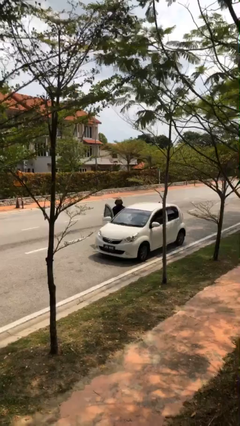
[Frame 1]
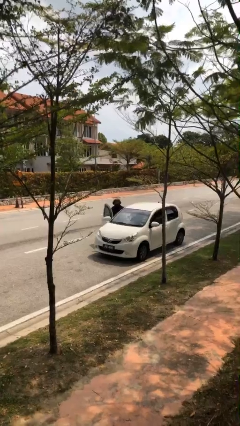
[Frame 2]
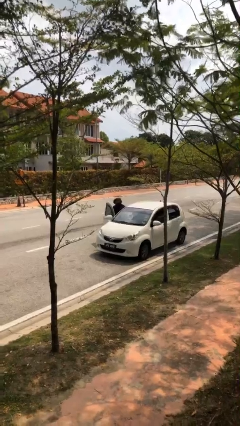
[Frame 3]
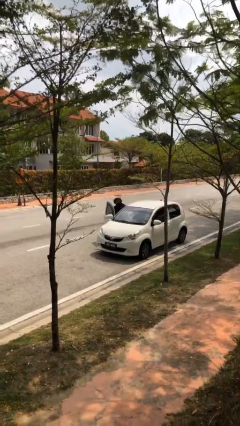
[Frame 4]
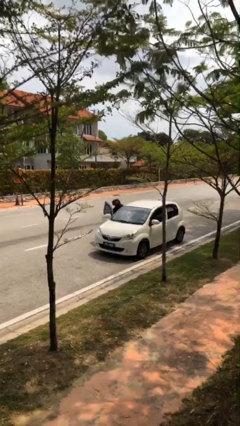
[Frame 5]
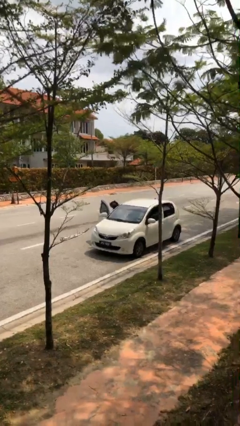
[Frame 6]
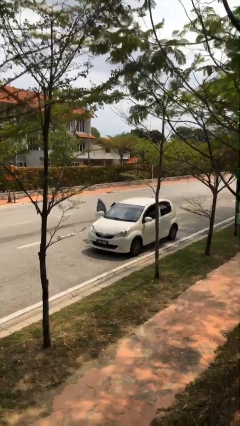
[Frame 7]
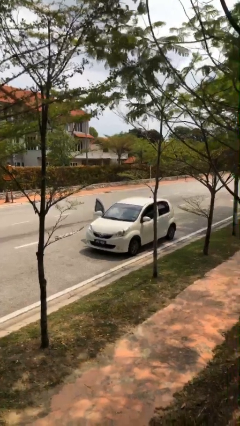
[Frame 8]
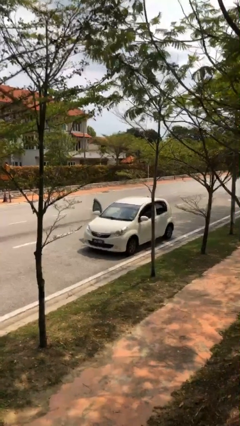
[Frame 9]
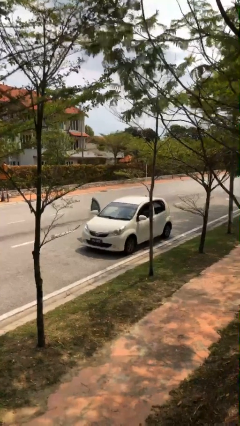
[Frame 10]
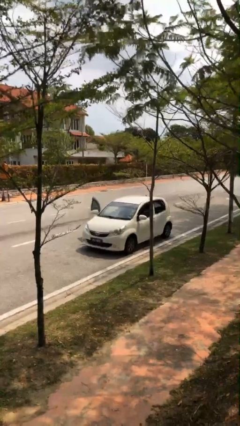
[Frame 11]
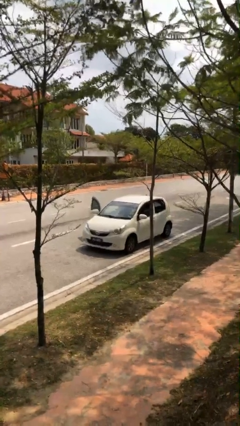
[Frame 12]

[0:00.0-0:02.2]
person enters car

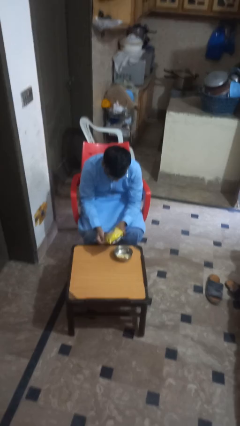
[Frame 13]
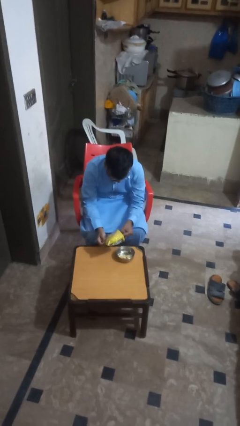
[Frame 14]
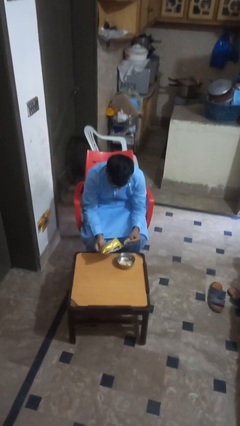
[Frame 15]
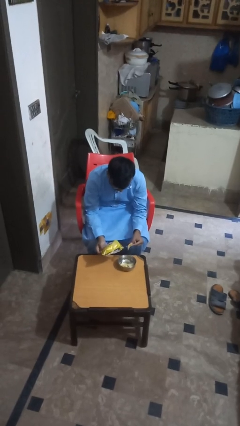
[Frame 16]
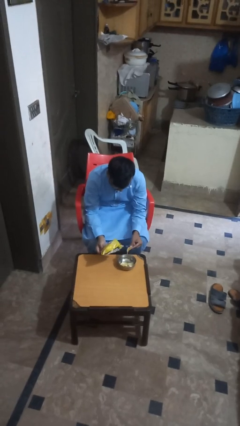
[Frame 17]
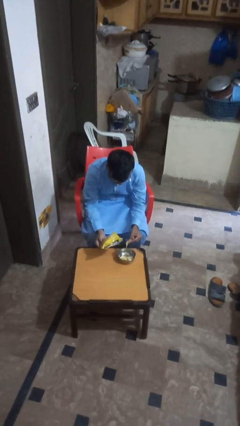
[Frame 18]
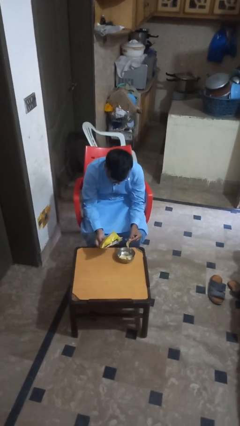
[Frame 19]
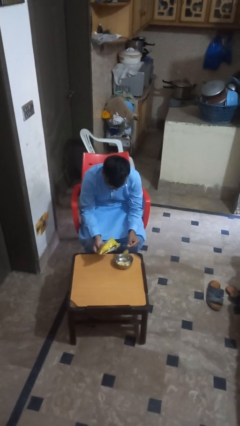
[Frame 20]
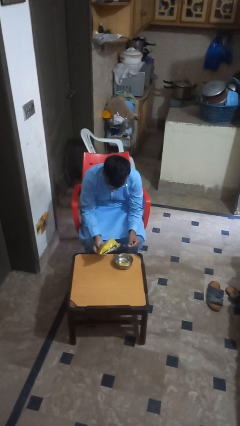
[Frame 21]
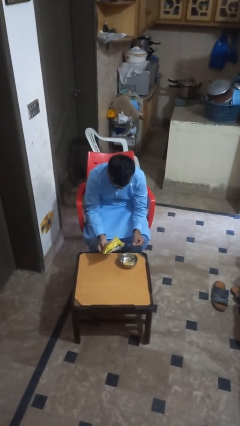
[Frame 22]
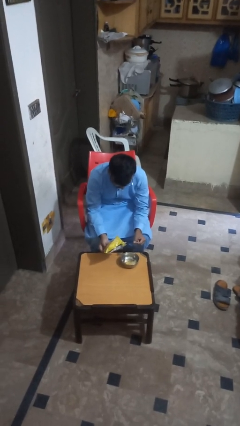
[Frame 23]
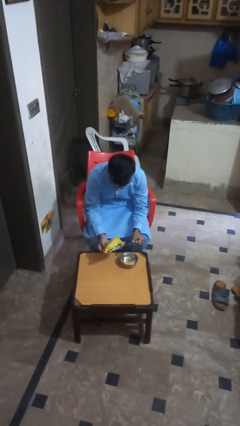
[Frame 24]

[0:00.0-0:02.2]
person pours into bowl

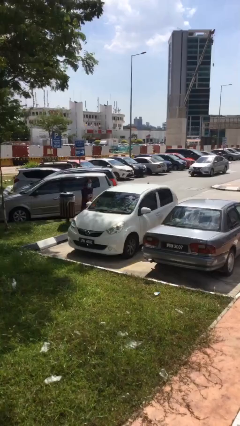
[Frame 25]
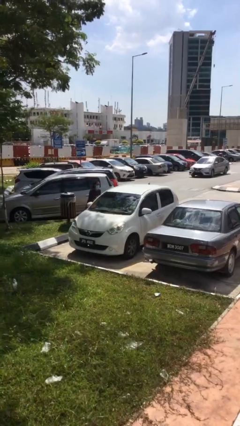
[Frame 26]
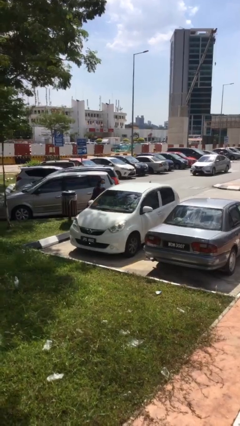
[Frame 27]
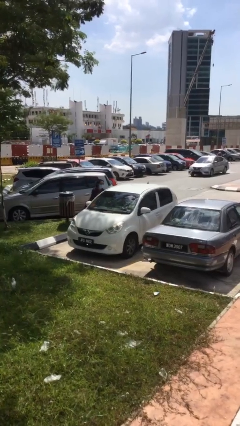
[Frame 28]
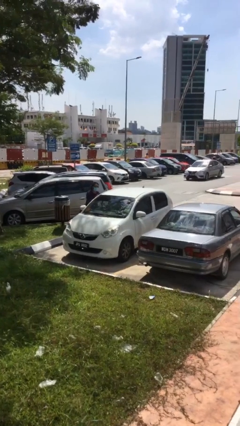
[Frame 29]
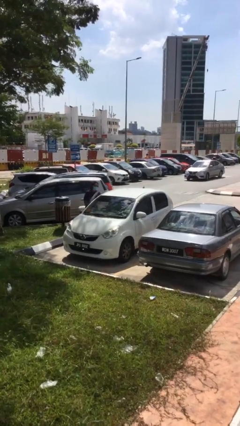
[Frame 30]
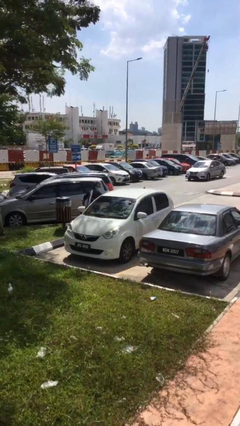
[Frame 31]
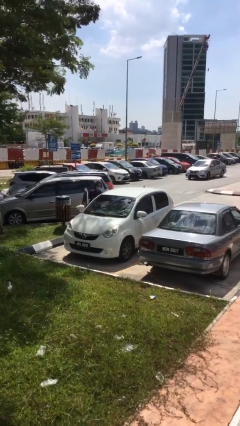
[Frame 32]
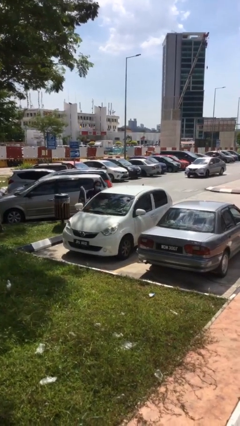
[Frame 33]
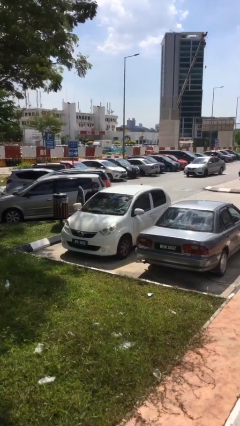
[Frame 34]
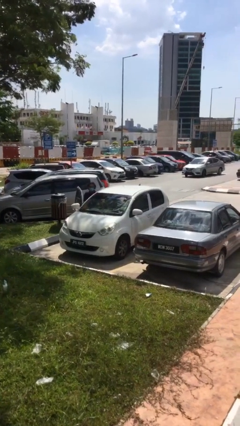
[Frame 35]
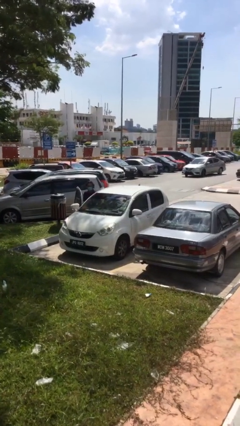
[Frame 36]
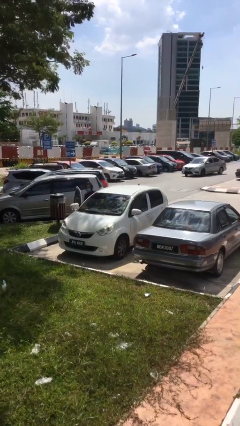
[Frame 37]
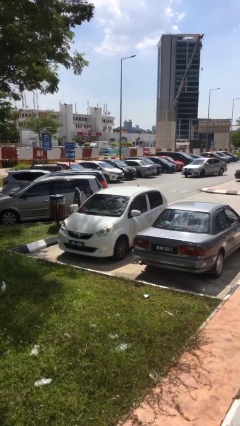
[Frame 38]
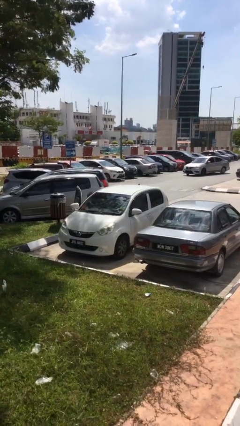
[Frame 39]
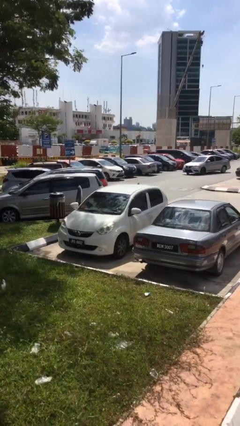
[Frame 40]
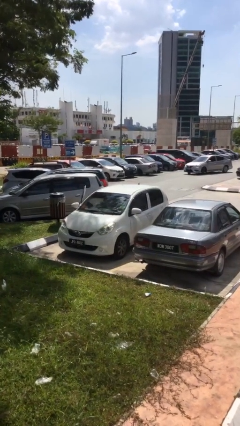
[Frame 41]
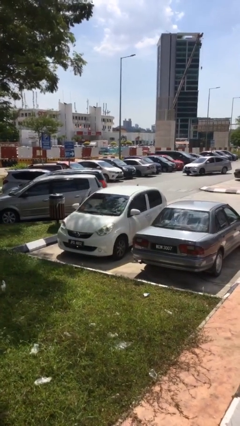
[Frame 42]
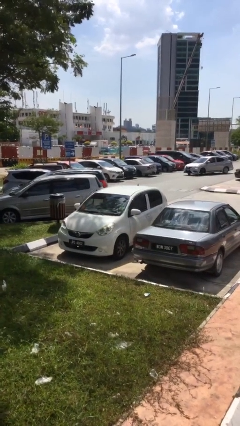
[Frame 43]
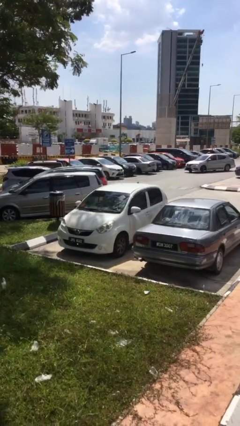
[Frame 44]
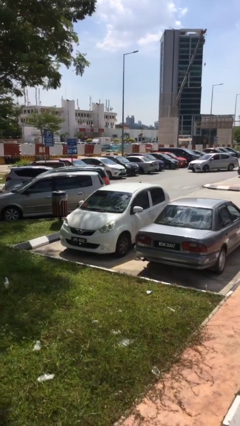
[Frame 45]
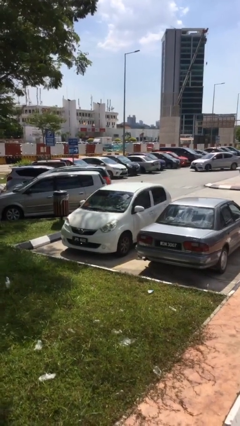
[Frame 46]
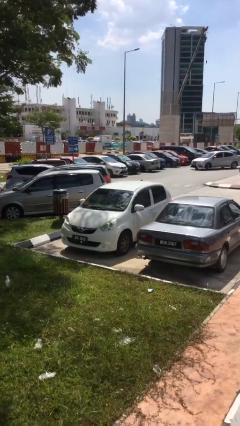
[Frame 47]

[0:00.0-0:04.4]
car picks up person

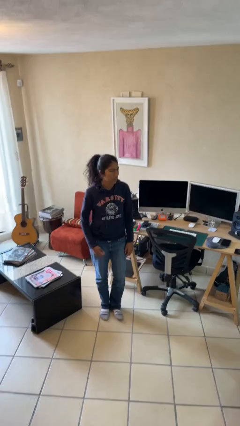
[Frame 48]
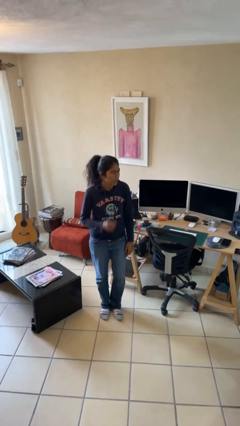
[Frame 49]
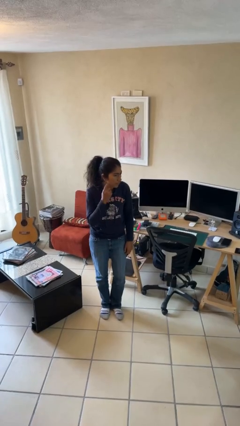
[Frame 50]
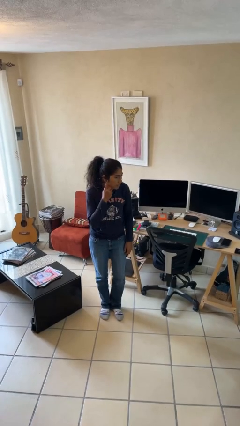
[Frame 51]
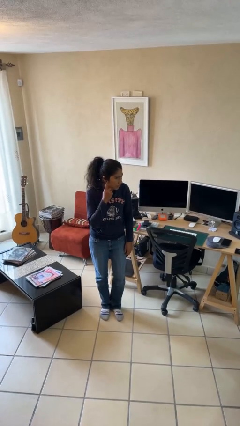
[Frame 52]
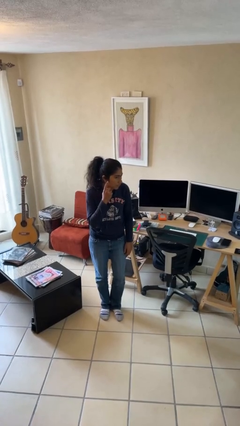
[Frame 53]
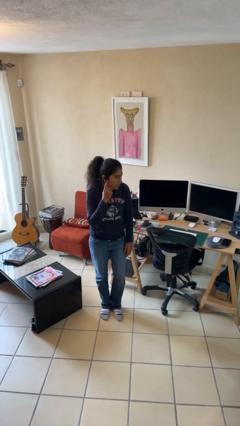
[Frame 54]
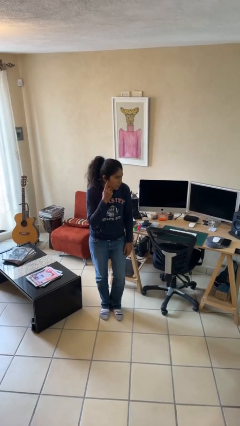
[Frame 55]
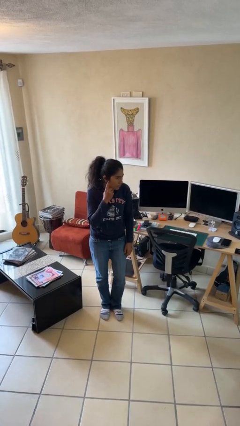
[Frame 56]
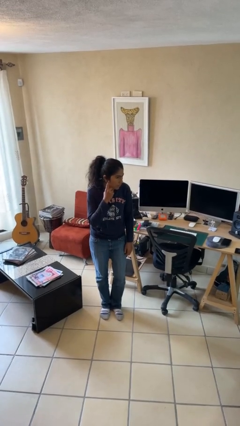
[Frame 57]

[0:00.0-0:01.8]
person gestures listen closely

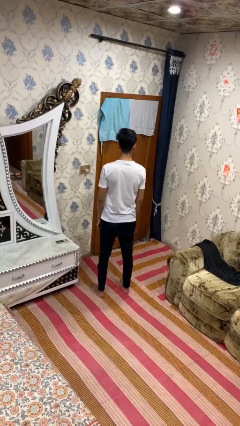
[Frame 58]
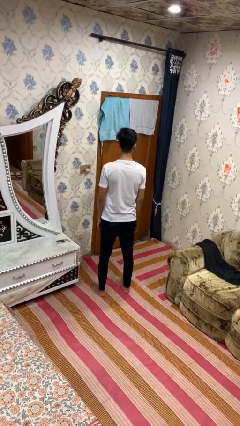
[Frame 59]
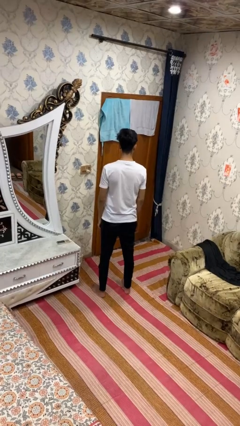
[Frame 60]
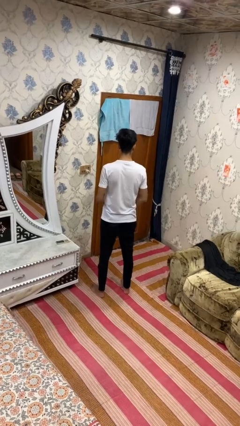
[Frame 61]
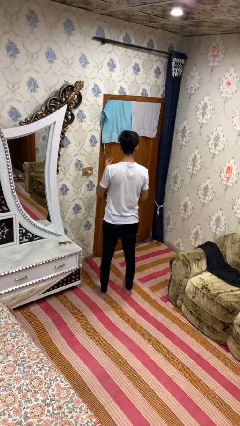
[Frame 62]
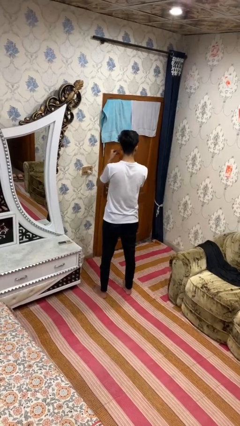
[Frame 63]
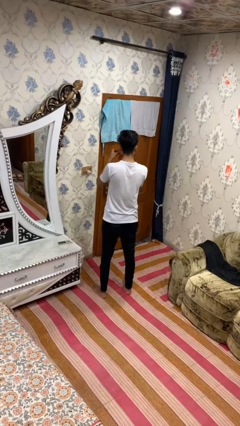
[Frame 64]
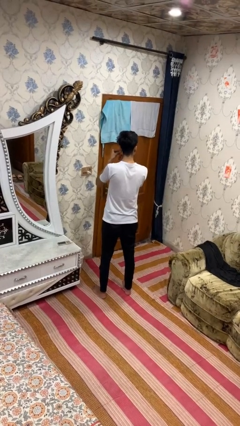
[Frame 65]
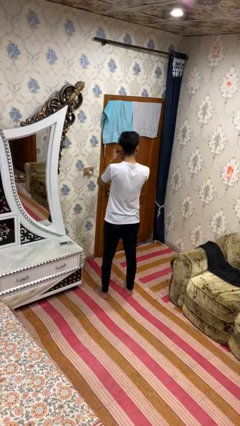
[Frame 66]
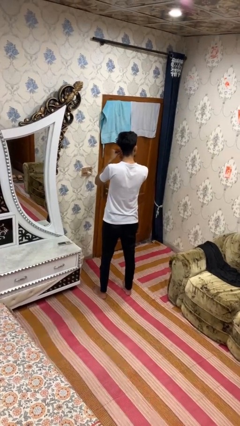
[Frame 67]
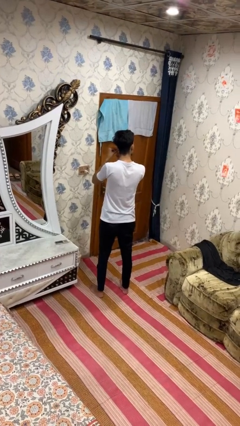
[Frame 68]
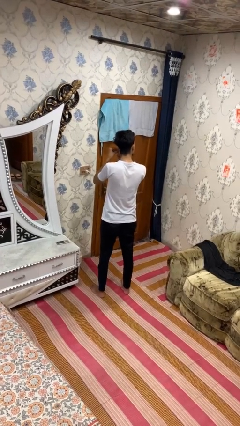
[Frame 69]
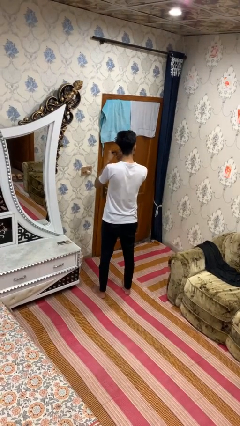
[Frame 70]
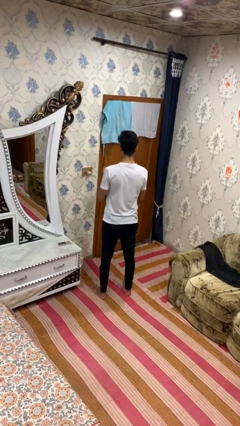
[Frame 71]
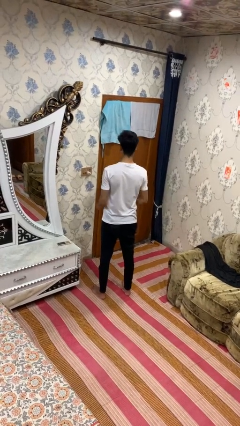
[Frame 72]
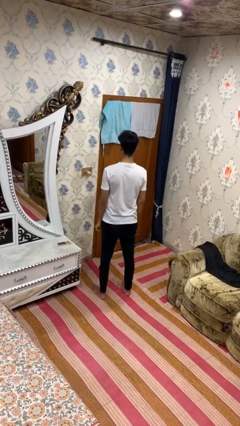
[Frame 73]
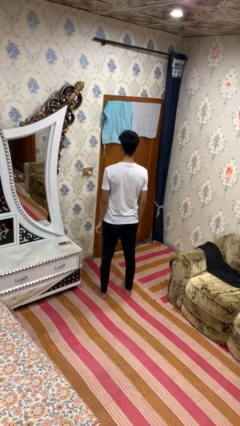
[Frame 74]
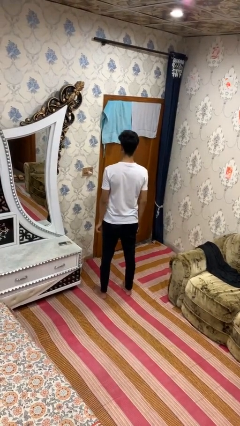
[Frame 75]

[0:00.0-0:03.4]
person takes off earrings

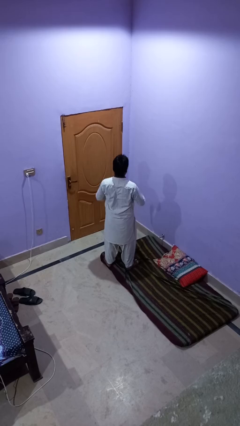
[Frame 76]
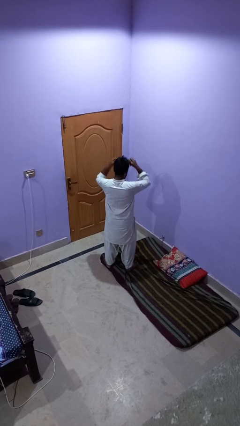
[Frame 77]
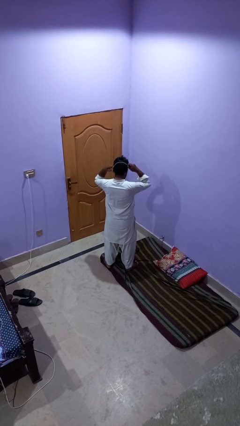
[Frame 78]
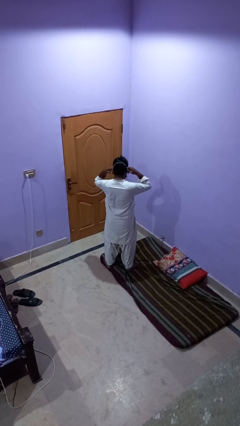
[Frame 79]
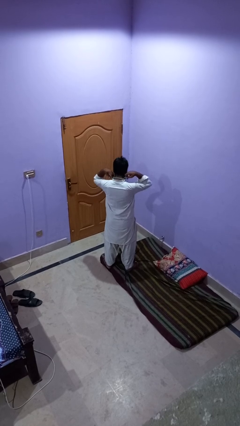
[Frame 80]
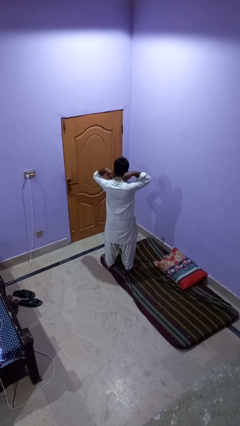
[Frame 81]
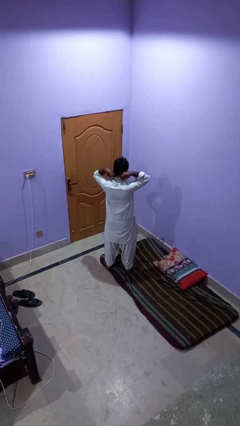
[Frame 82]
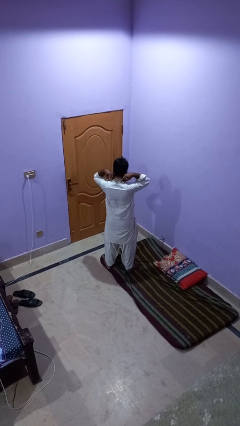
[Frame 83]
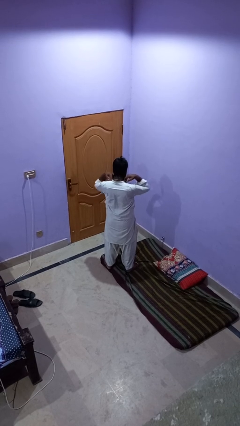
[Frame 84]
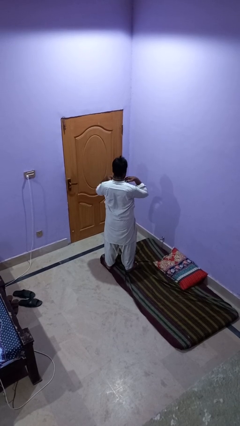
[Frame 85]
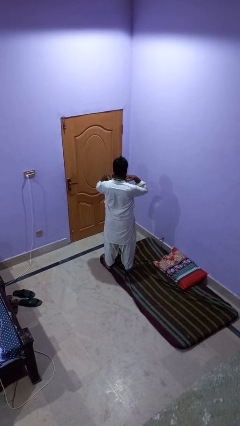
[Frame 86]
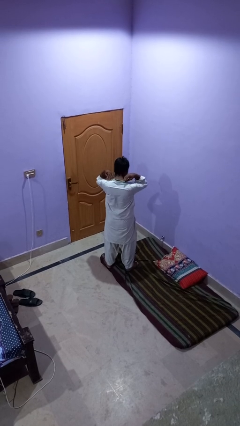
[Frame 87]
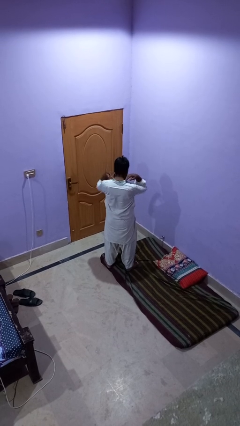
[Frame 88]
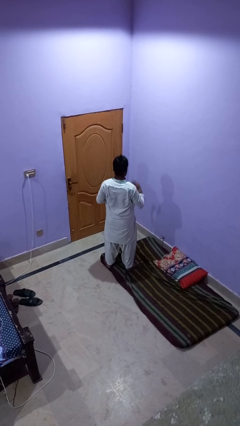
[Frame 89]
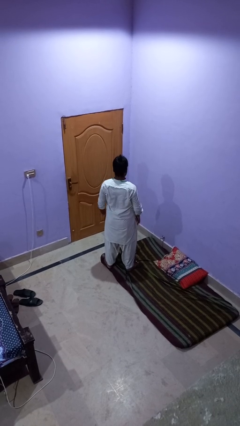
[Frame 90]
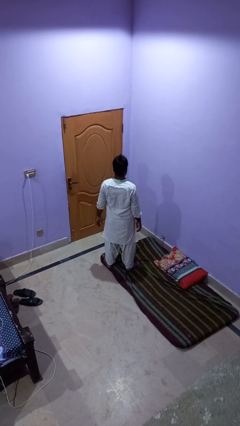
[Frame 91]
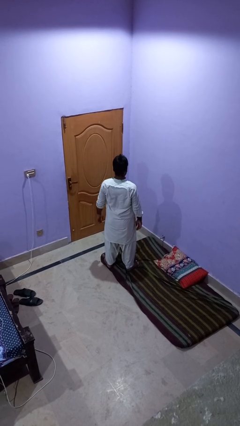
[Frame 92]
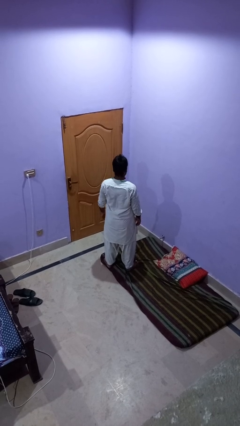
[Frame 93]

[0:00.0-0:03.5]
person puts on necklace

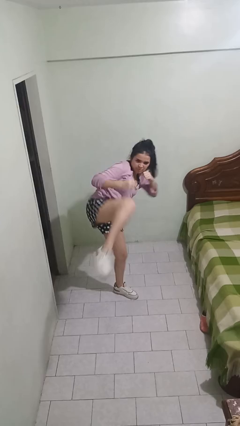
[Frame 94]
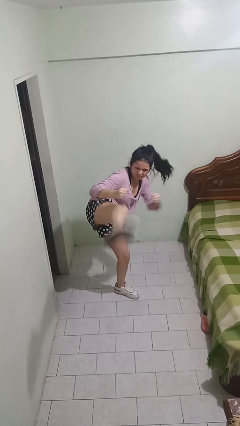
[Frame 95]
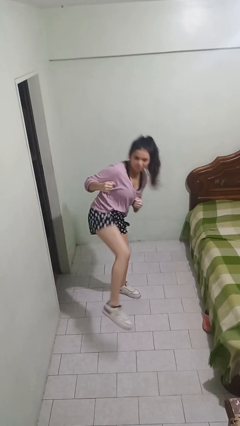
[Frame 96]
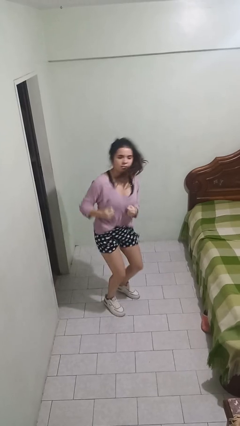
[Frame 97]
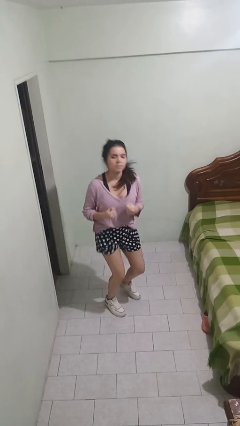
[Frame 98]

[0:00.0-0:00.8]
person karate kicks
